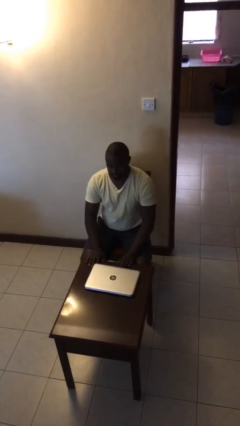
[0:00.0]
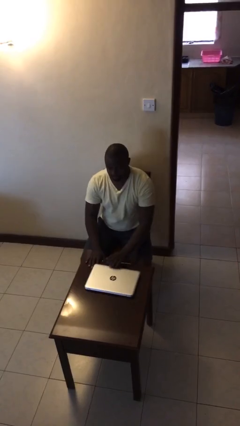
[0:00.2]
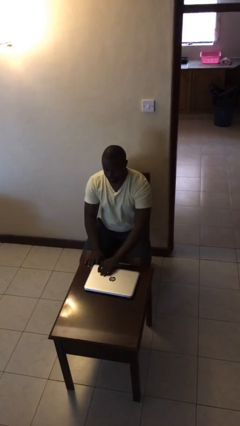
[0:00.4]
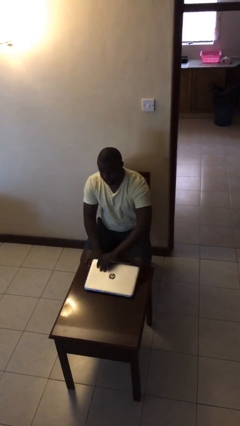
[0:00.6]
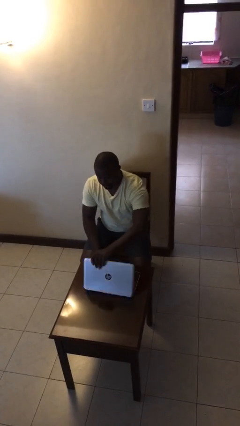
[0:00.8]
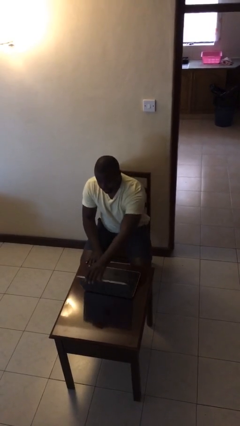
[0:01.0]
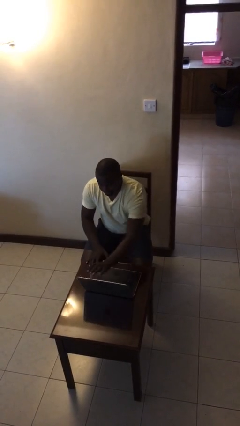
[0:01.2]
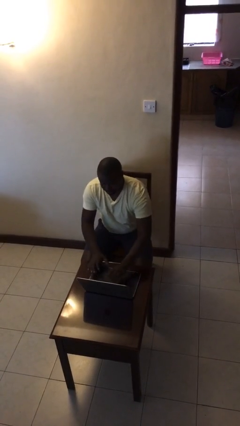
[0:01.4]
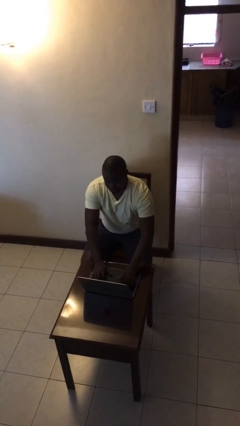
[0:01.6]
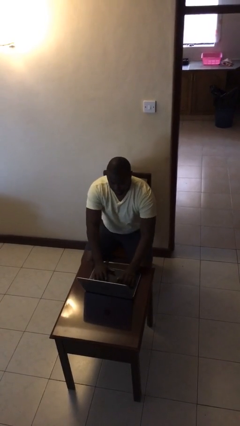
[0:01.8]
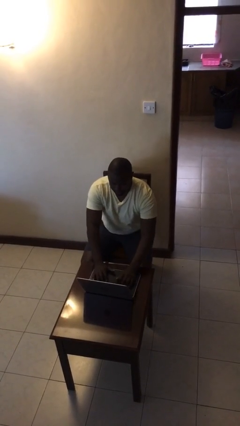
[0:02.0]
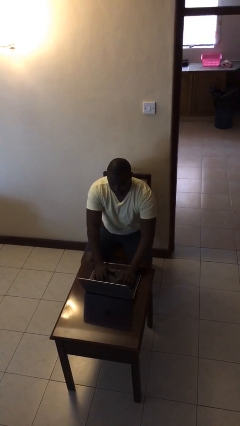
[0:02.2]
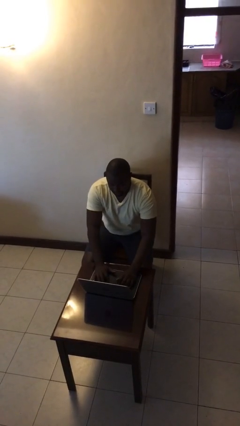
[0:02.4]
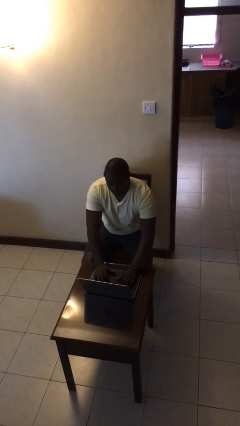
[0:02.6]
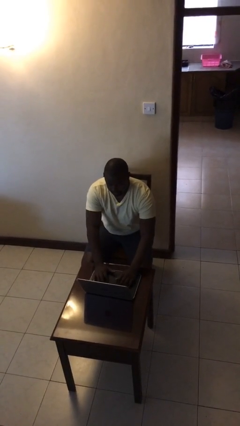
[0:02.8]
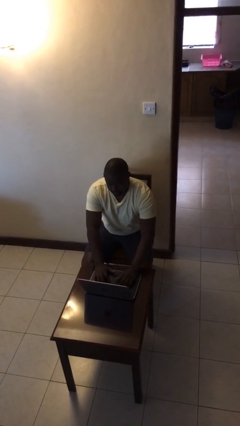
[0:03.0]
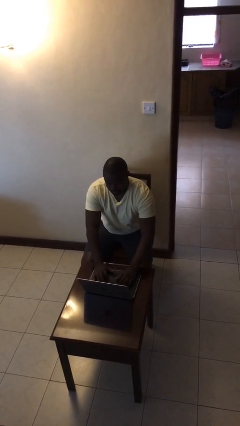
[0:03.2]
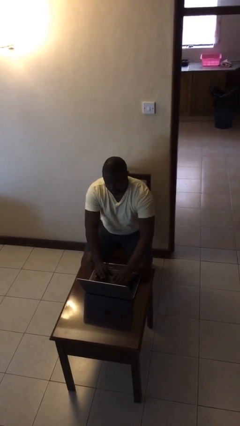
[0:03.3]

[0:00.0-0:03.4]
person interacts with laptop

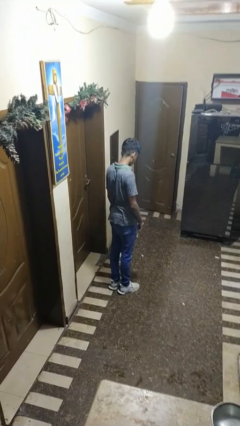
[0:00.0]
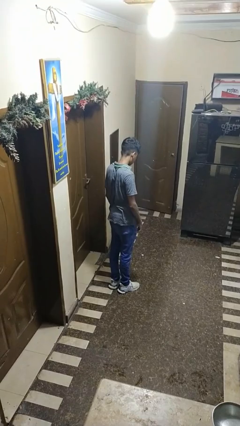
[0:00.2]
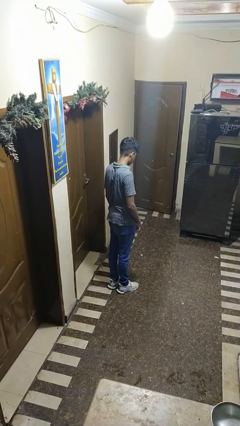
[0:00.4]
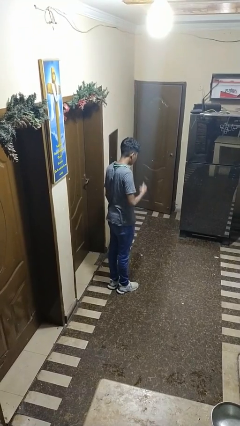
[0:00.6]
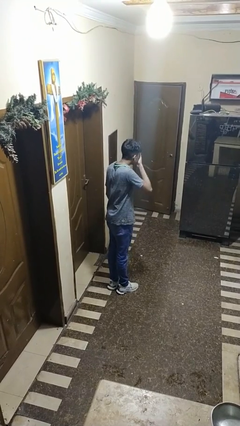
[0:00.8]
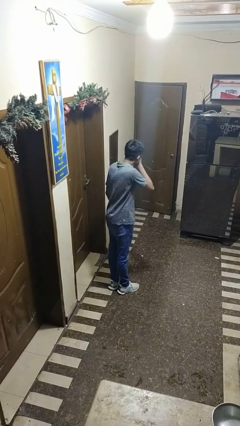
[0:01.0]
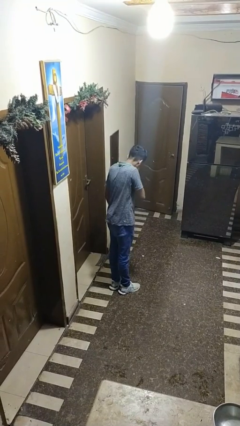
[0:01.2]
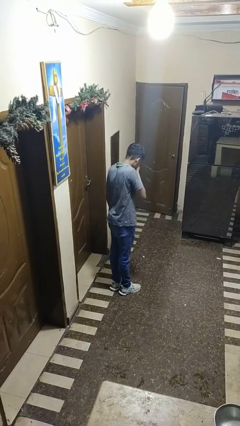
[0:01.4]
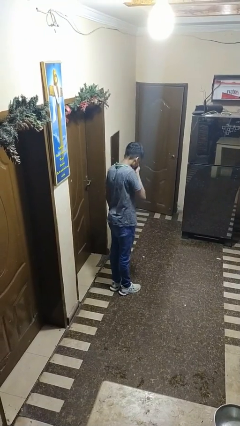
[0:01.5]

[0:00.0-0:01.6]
person sneezes into hand

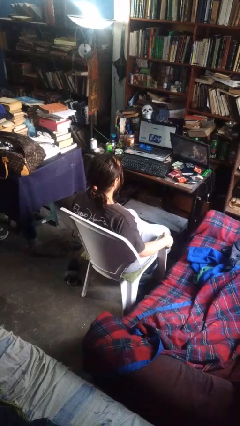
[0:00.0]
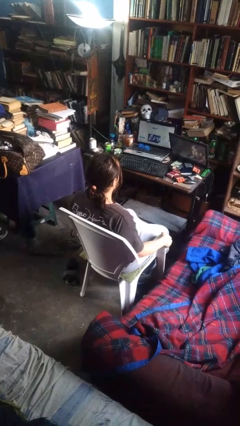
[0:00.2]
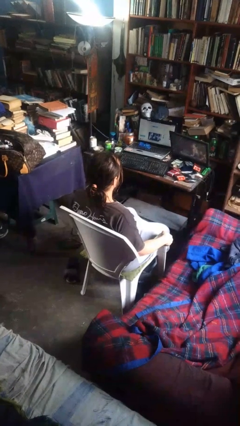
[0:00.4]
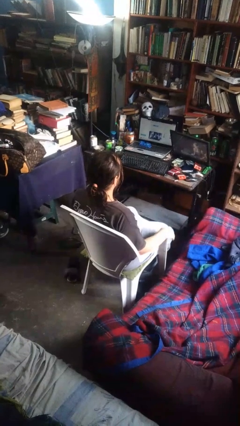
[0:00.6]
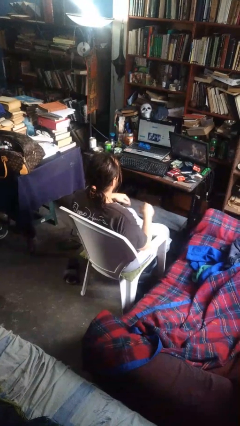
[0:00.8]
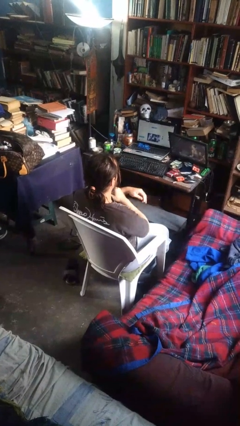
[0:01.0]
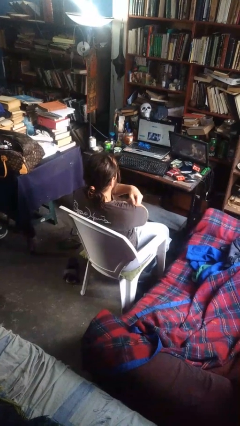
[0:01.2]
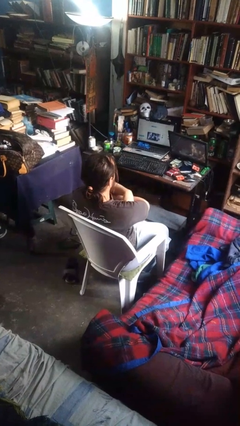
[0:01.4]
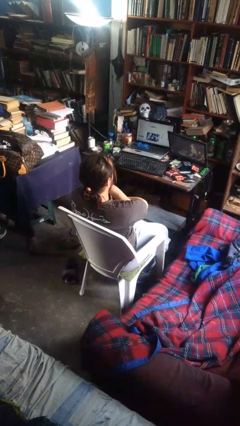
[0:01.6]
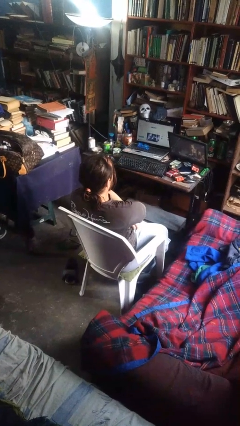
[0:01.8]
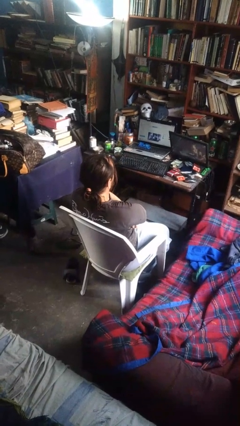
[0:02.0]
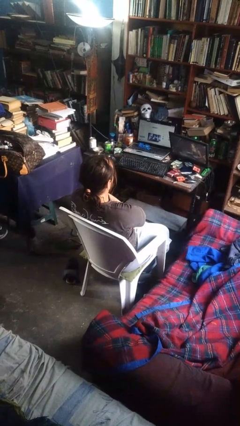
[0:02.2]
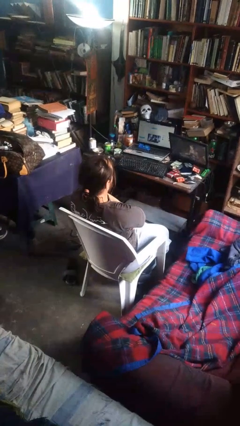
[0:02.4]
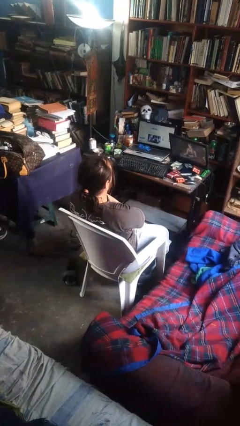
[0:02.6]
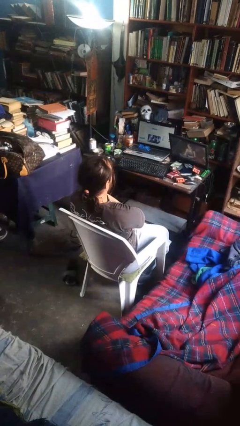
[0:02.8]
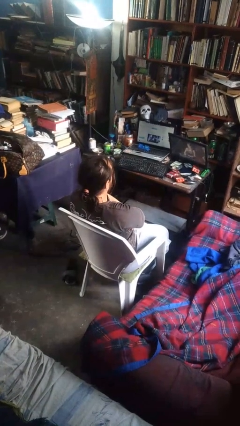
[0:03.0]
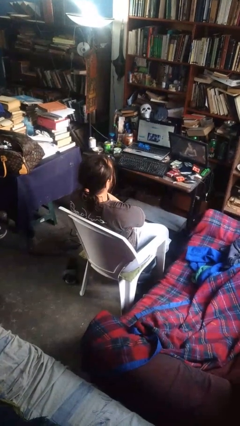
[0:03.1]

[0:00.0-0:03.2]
person crosses arms

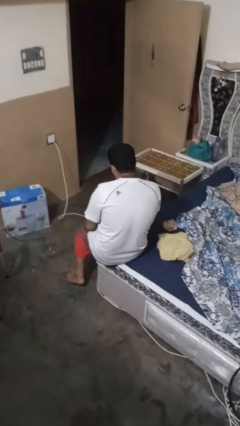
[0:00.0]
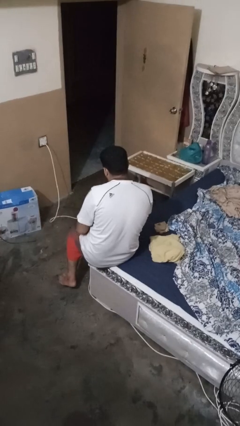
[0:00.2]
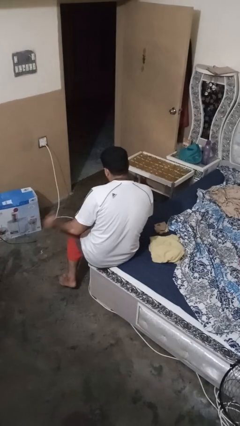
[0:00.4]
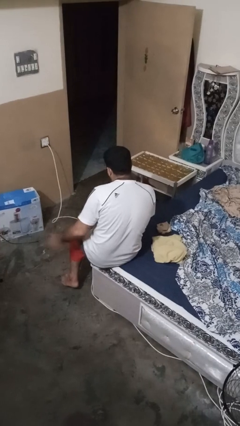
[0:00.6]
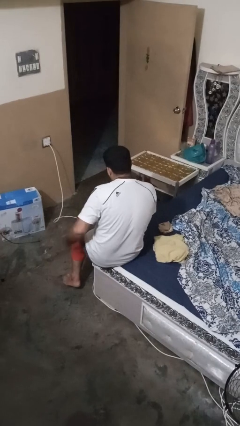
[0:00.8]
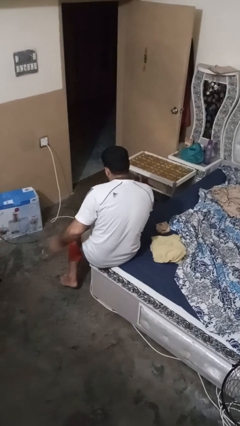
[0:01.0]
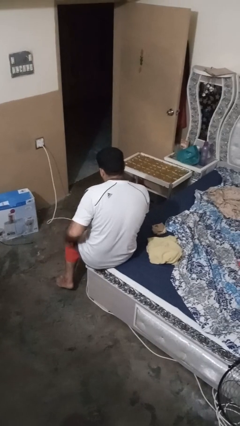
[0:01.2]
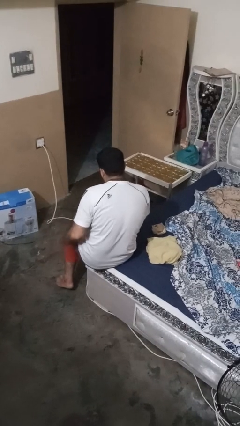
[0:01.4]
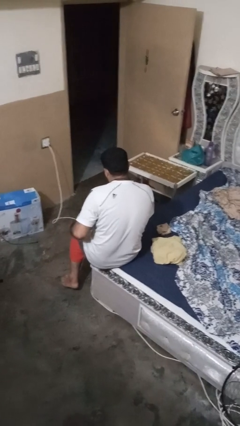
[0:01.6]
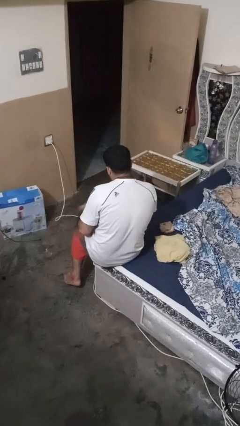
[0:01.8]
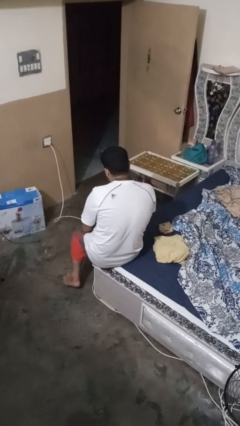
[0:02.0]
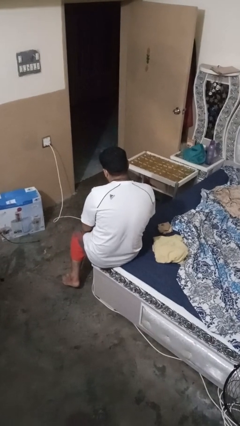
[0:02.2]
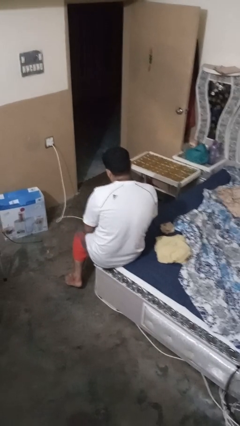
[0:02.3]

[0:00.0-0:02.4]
person slaps hands on thighs

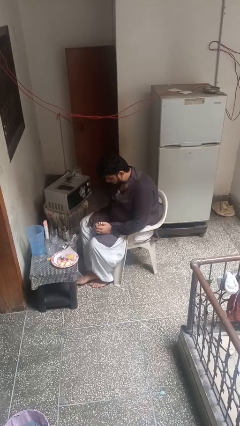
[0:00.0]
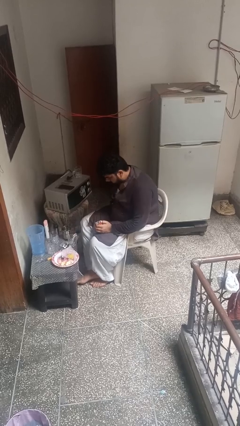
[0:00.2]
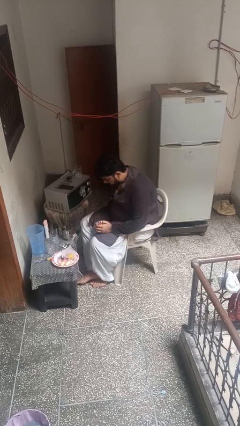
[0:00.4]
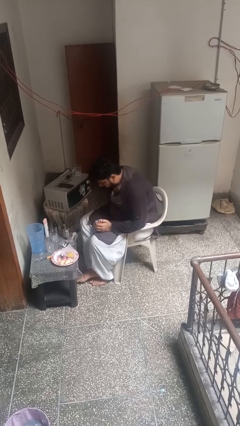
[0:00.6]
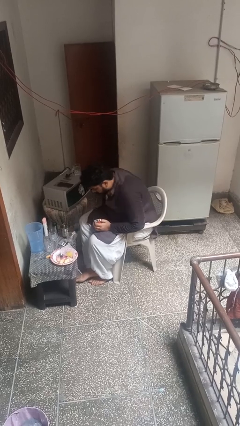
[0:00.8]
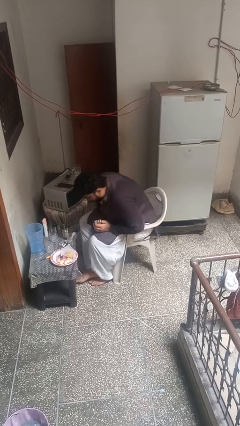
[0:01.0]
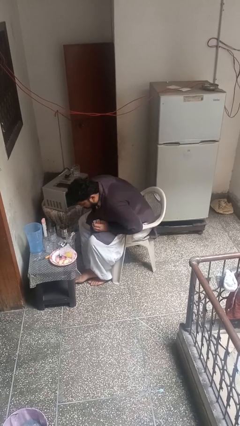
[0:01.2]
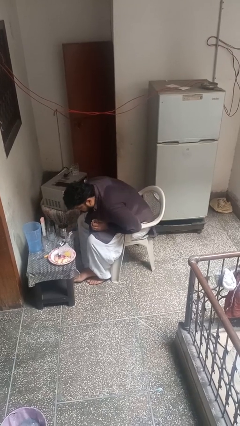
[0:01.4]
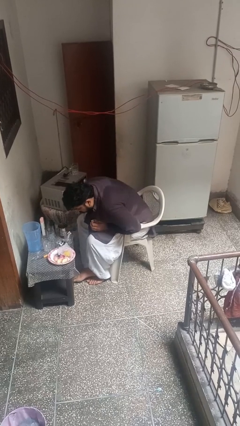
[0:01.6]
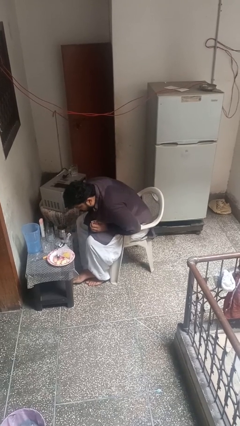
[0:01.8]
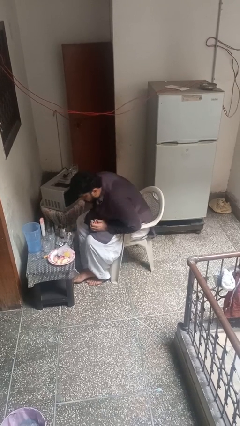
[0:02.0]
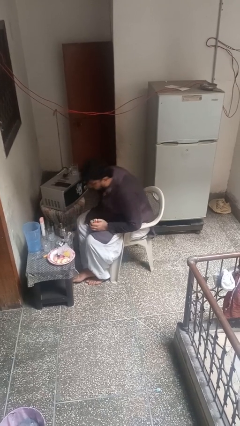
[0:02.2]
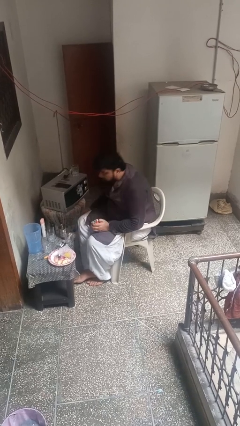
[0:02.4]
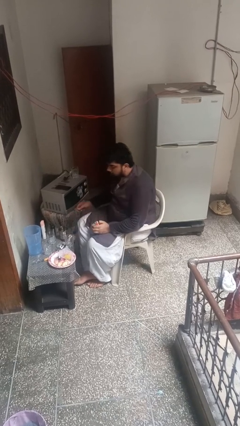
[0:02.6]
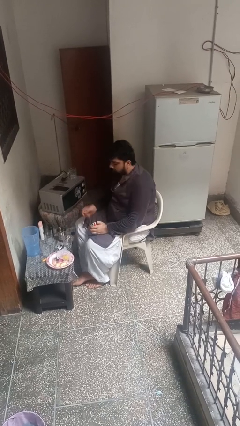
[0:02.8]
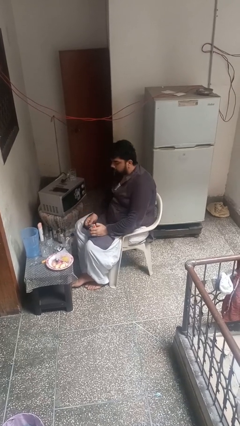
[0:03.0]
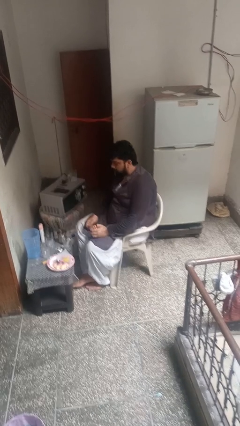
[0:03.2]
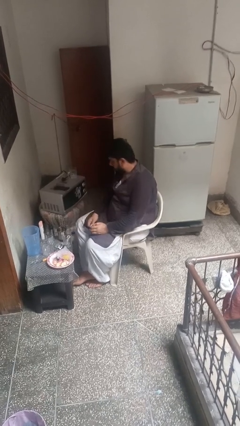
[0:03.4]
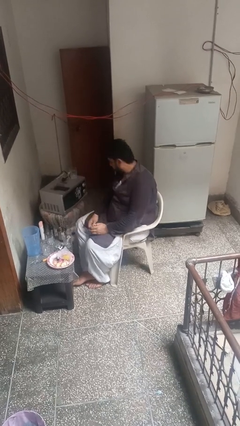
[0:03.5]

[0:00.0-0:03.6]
person extinguishes candle

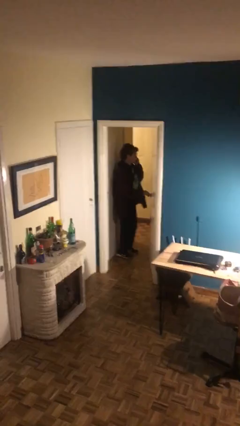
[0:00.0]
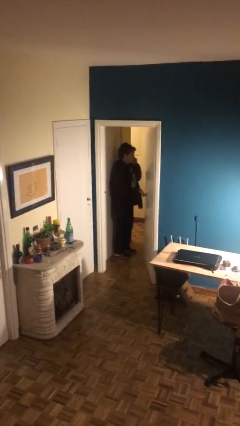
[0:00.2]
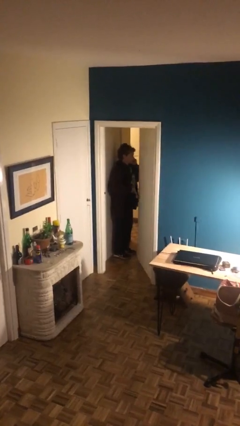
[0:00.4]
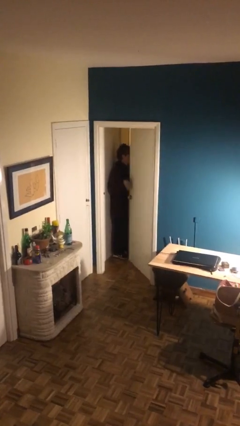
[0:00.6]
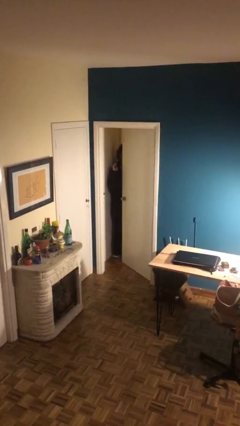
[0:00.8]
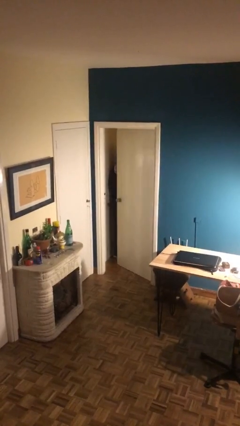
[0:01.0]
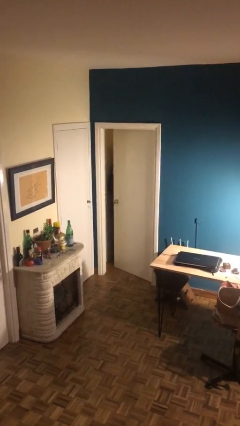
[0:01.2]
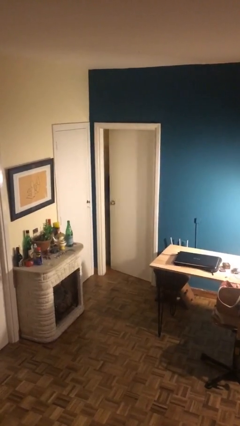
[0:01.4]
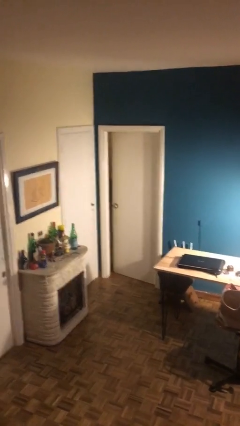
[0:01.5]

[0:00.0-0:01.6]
person closes facility door

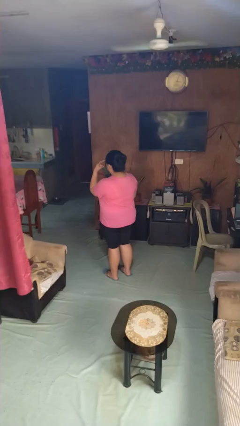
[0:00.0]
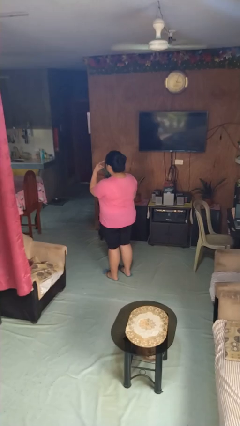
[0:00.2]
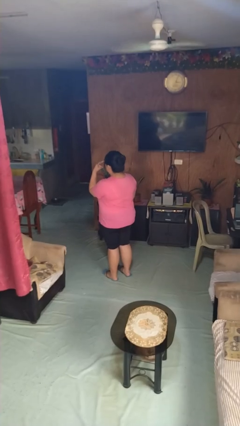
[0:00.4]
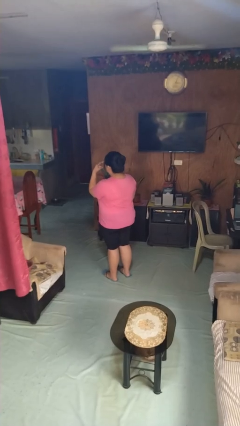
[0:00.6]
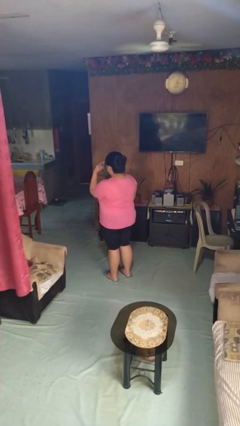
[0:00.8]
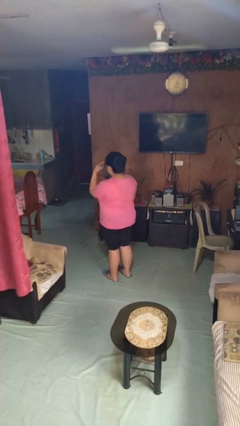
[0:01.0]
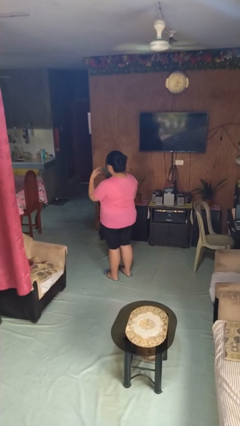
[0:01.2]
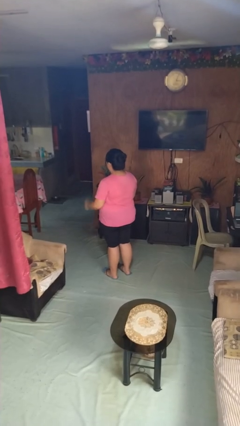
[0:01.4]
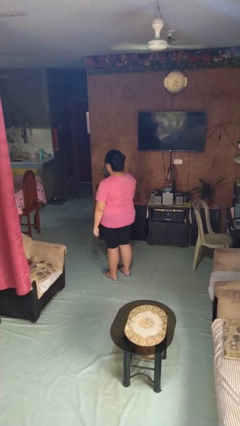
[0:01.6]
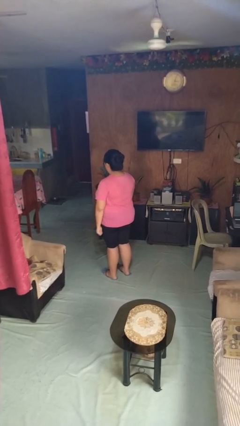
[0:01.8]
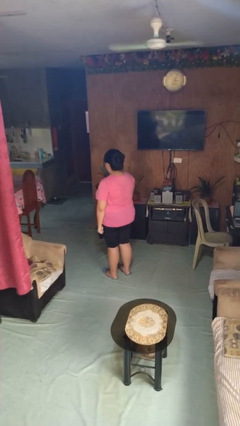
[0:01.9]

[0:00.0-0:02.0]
person gestures watch closely
